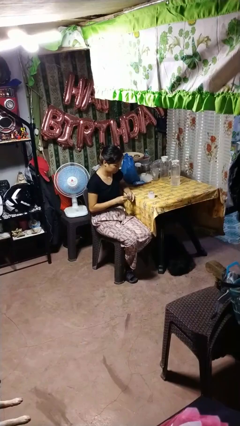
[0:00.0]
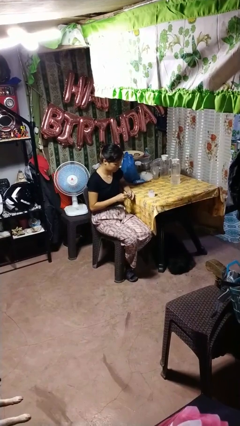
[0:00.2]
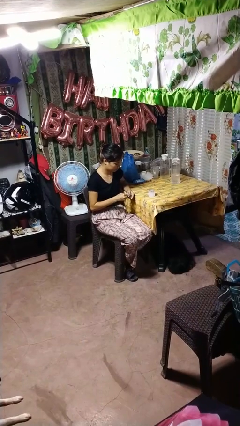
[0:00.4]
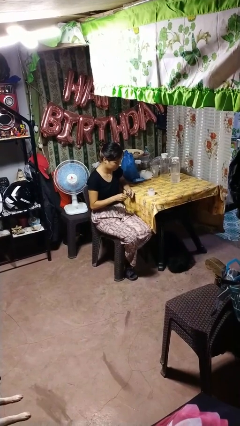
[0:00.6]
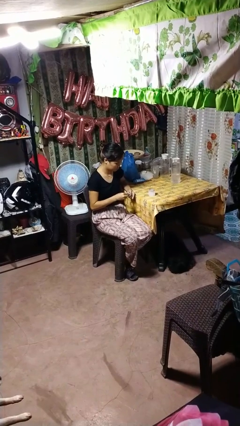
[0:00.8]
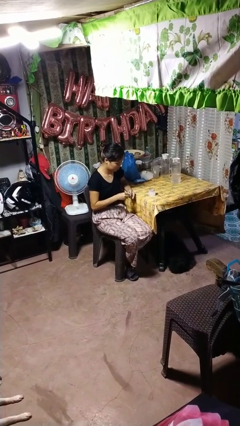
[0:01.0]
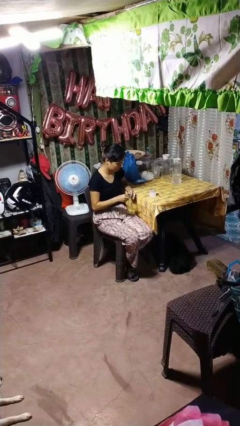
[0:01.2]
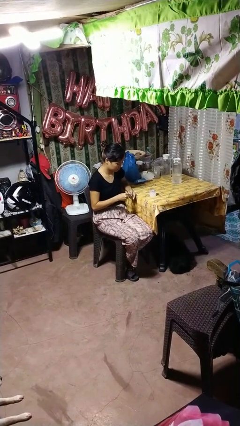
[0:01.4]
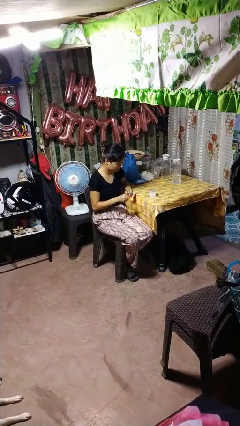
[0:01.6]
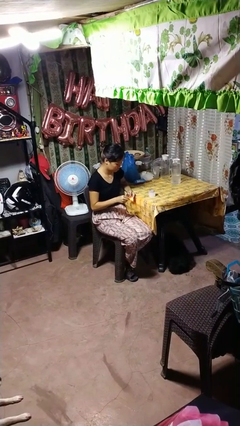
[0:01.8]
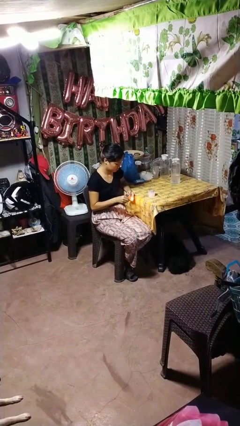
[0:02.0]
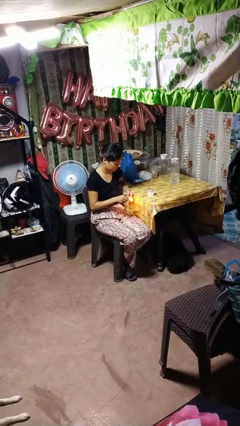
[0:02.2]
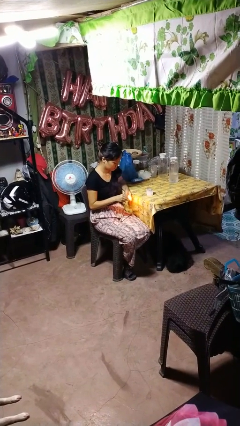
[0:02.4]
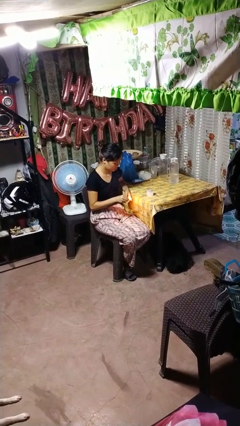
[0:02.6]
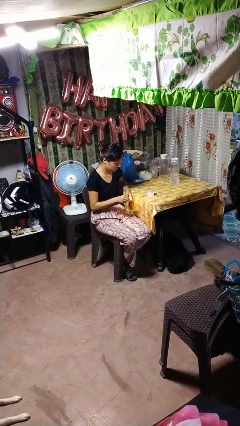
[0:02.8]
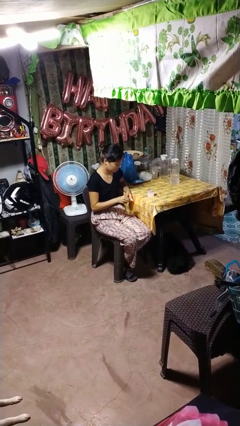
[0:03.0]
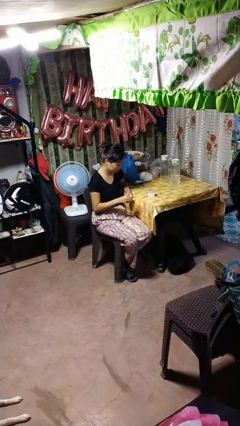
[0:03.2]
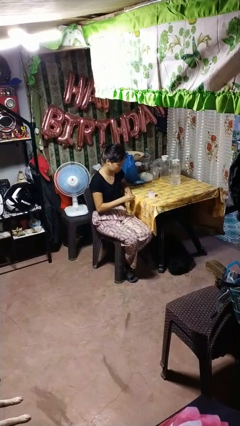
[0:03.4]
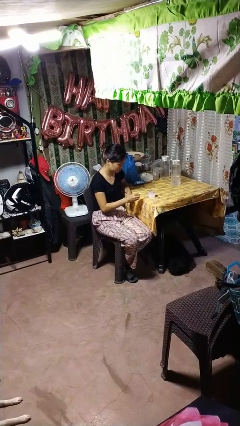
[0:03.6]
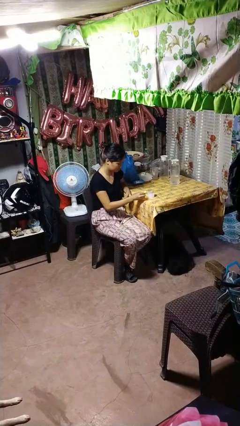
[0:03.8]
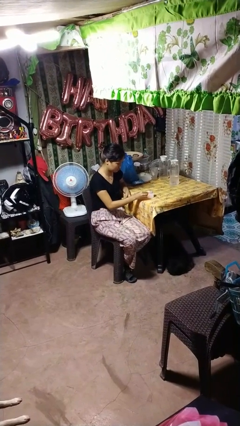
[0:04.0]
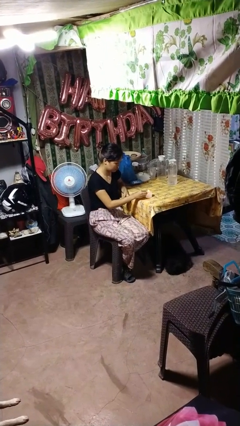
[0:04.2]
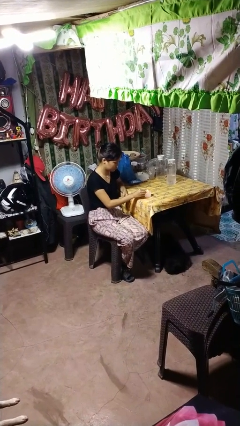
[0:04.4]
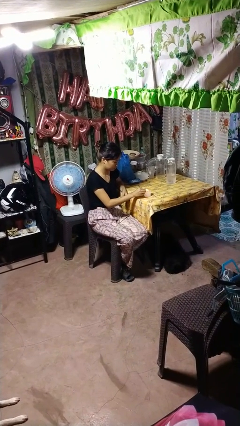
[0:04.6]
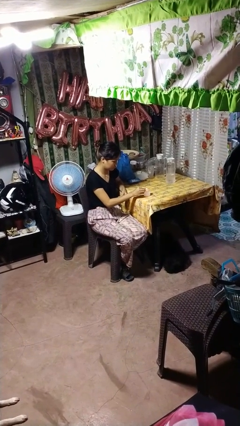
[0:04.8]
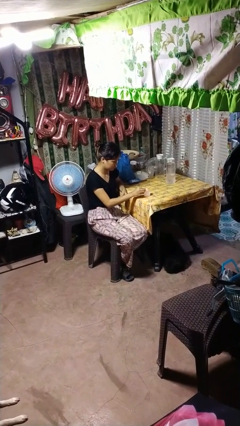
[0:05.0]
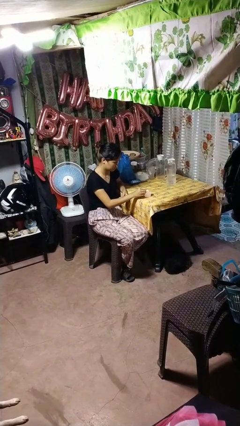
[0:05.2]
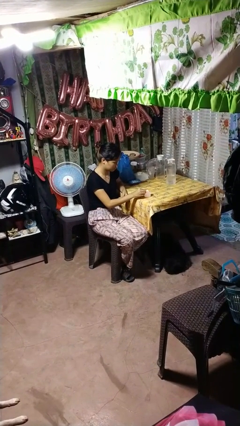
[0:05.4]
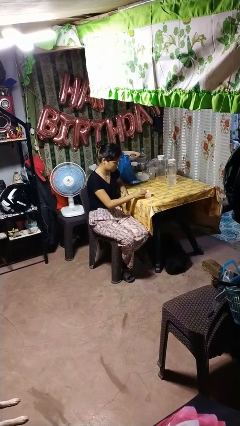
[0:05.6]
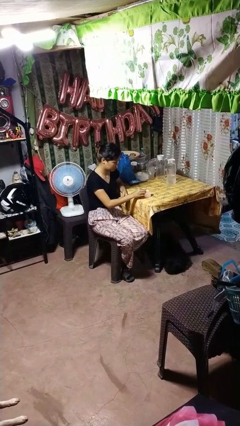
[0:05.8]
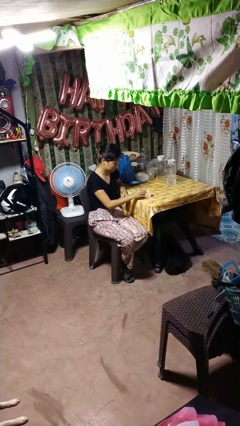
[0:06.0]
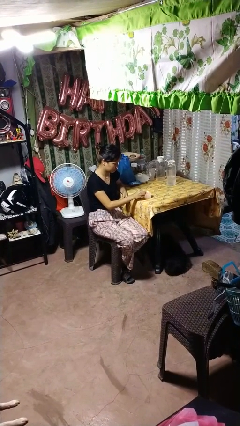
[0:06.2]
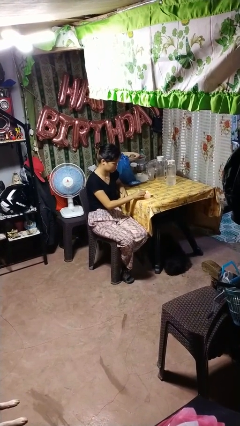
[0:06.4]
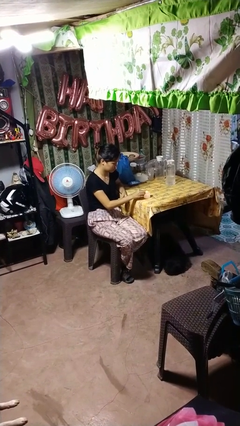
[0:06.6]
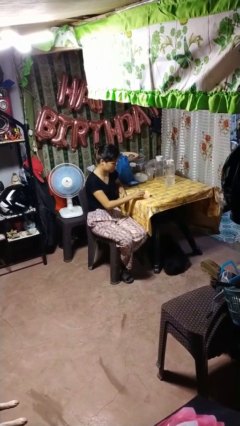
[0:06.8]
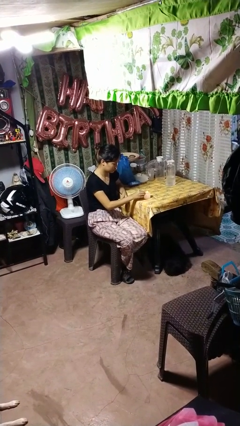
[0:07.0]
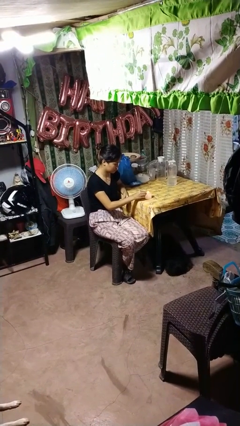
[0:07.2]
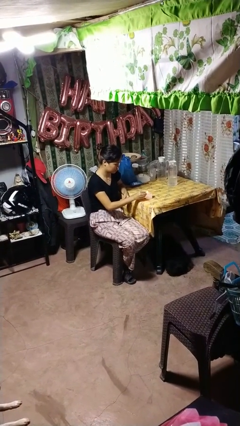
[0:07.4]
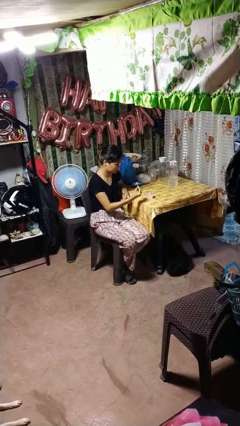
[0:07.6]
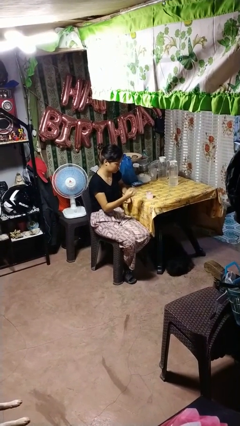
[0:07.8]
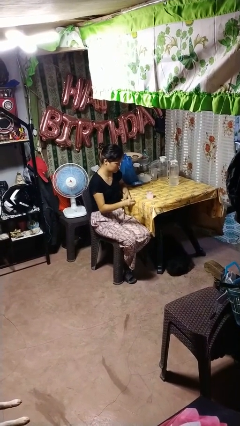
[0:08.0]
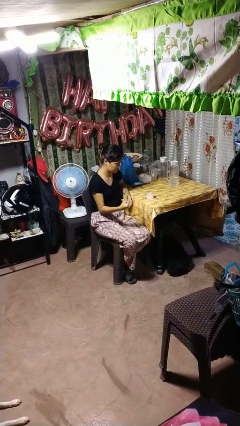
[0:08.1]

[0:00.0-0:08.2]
person lights candle

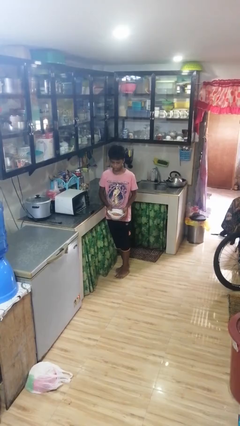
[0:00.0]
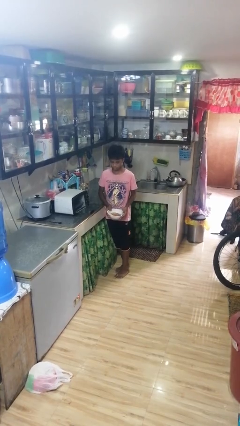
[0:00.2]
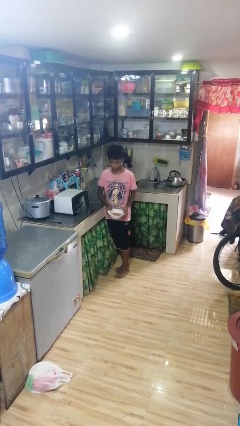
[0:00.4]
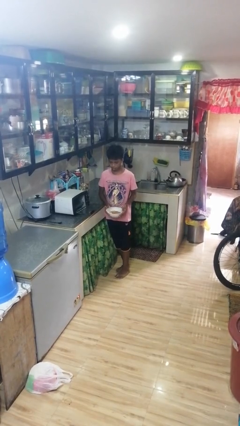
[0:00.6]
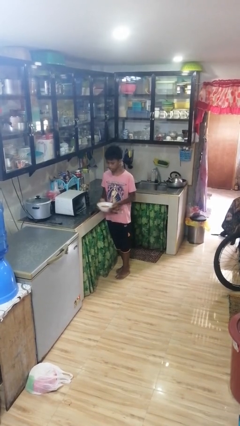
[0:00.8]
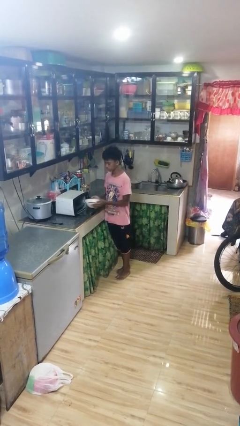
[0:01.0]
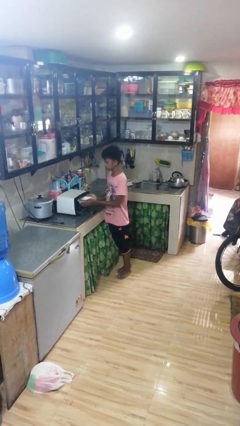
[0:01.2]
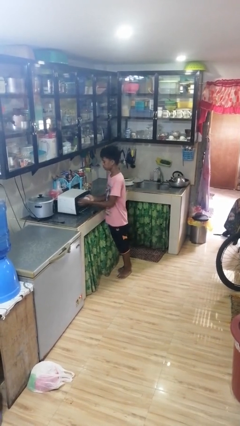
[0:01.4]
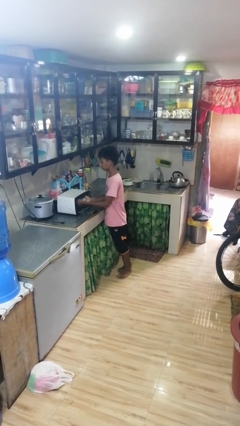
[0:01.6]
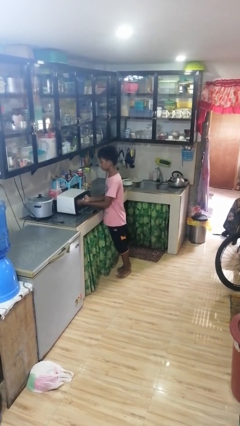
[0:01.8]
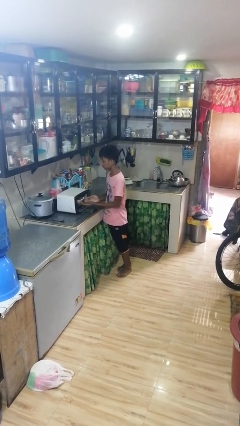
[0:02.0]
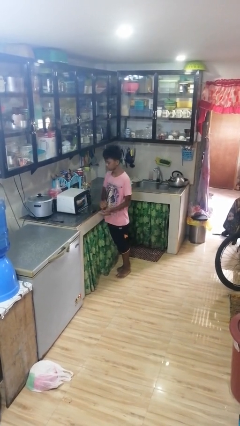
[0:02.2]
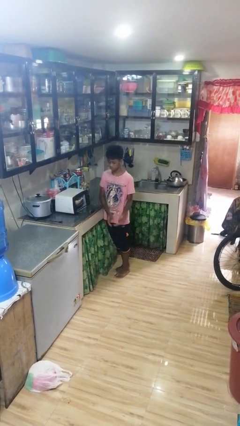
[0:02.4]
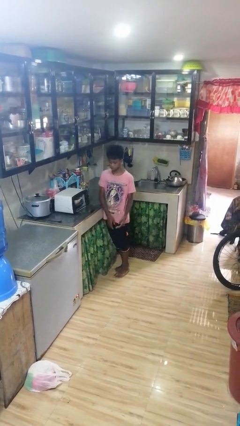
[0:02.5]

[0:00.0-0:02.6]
person puts object into microwave

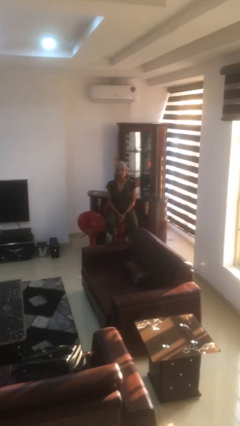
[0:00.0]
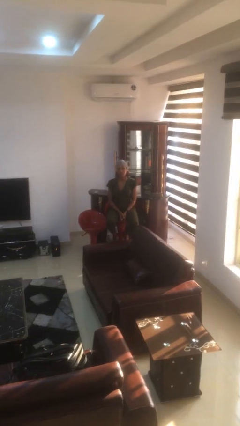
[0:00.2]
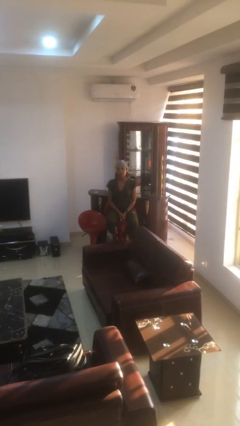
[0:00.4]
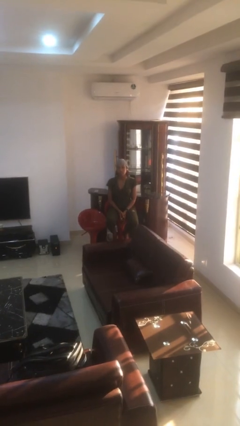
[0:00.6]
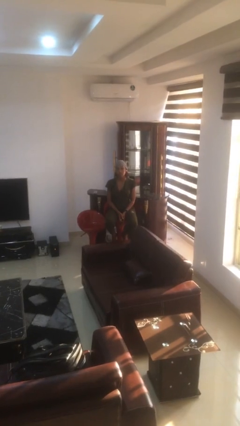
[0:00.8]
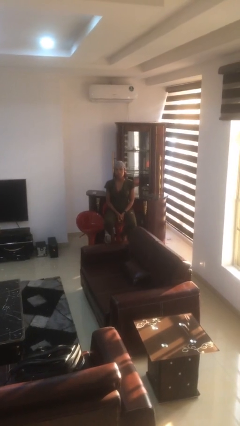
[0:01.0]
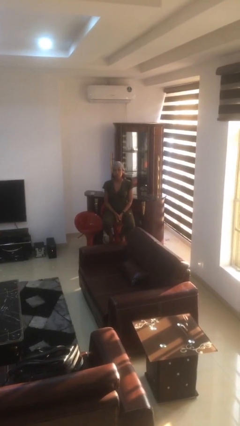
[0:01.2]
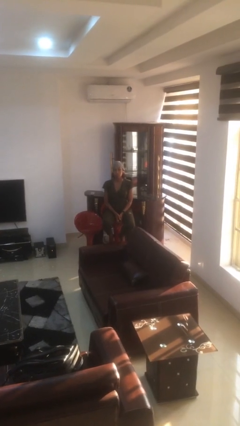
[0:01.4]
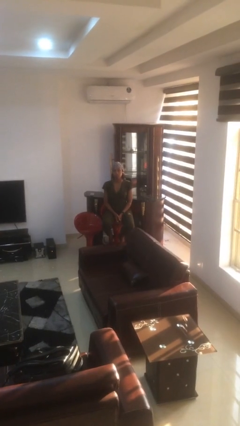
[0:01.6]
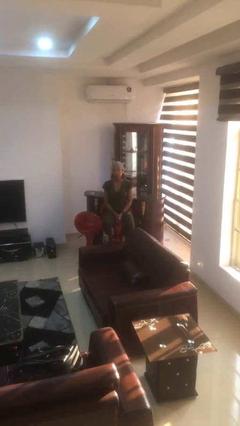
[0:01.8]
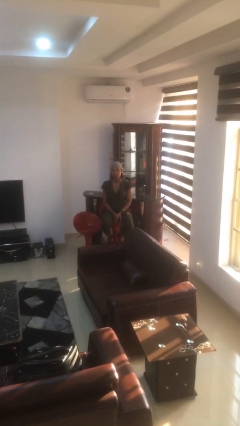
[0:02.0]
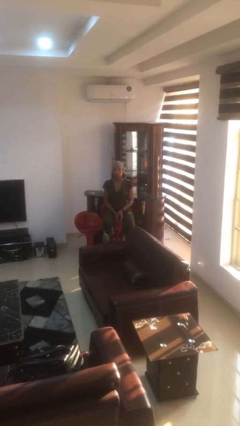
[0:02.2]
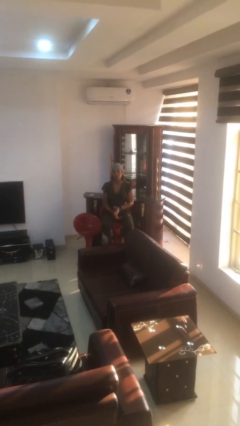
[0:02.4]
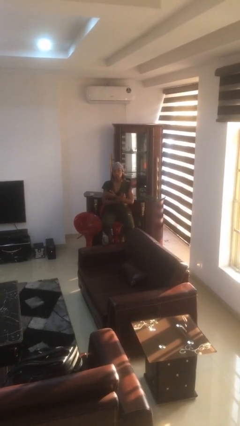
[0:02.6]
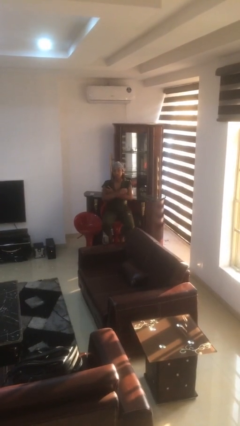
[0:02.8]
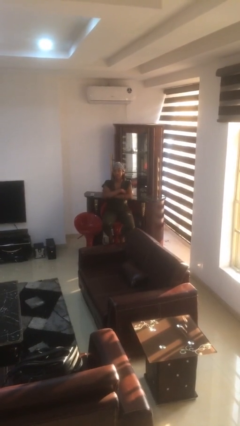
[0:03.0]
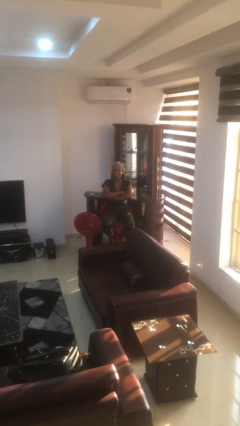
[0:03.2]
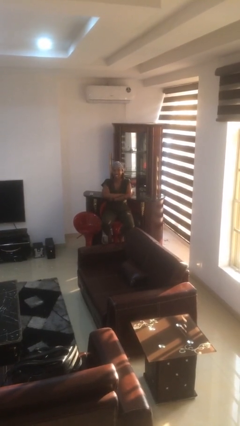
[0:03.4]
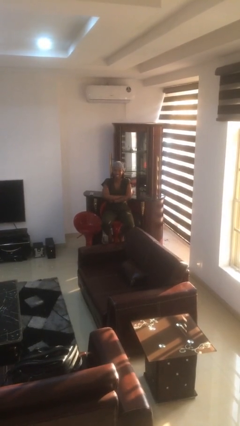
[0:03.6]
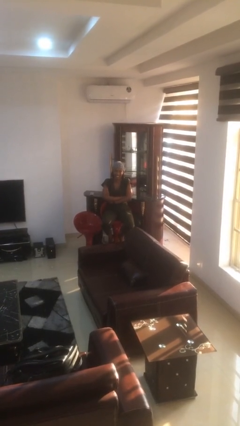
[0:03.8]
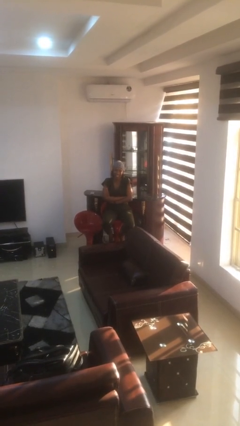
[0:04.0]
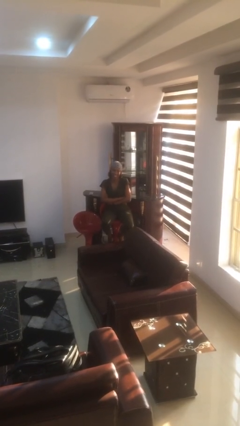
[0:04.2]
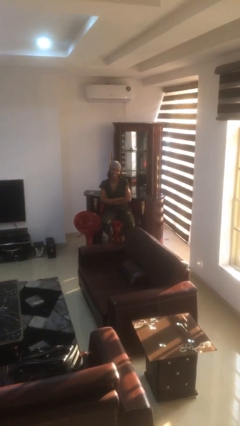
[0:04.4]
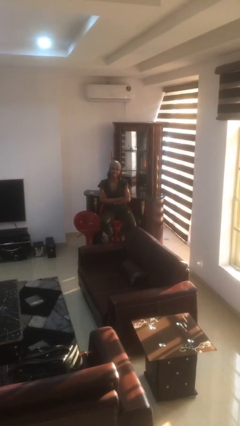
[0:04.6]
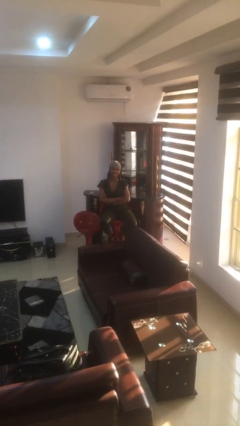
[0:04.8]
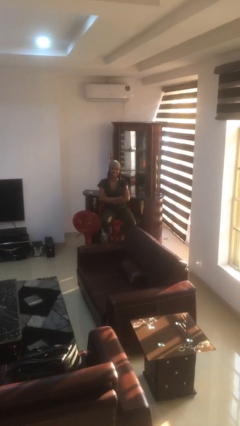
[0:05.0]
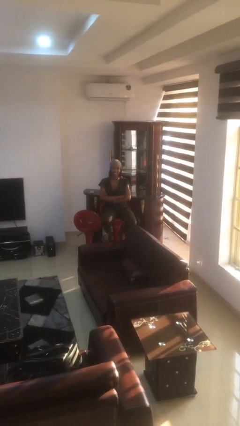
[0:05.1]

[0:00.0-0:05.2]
person crosses arms

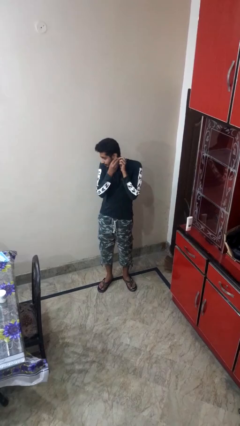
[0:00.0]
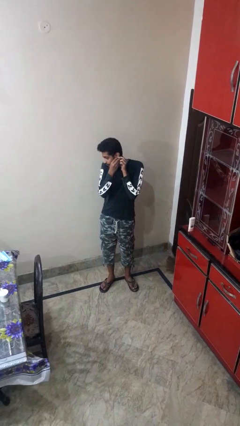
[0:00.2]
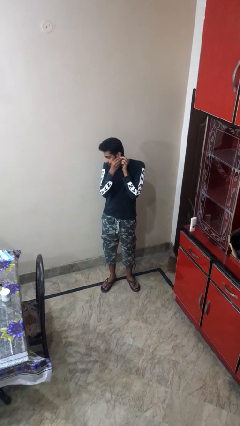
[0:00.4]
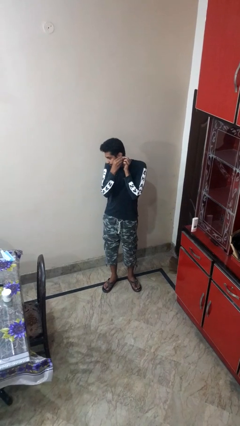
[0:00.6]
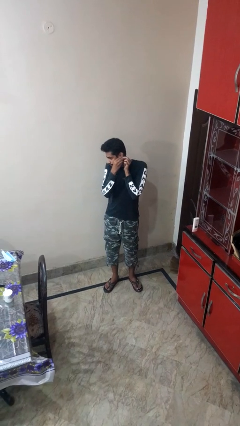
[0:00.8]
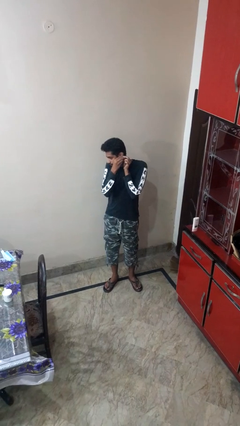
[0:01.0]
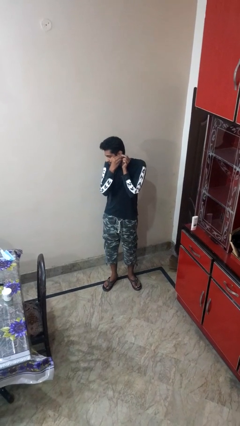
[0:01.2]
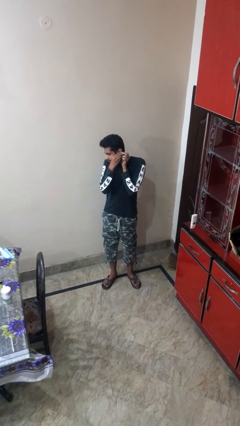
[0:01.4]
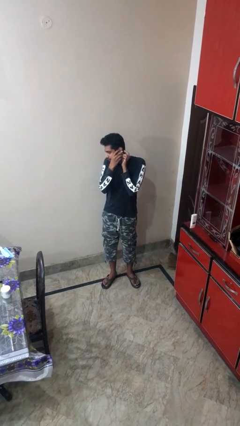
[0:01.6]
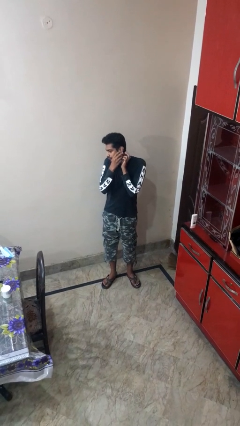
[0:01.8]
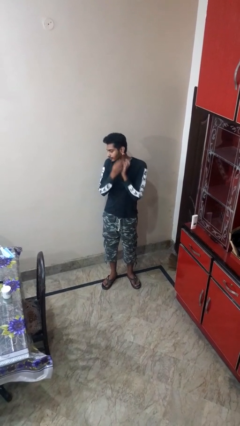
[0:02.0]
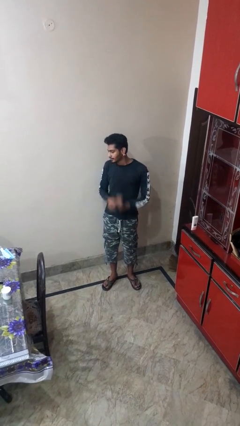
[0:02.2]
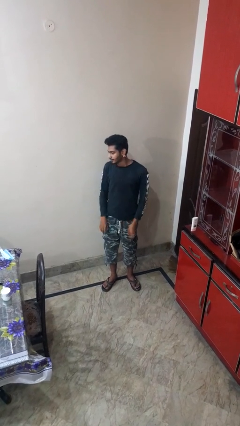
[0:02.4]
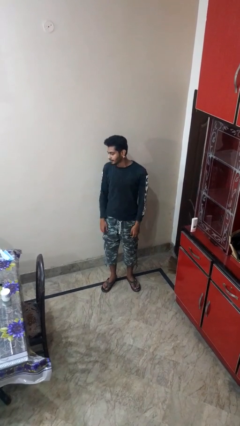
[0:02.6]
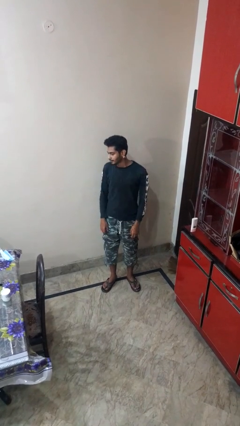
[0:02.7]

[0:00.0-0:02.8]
person puts on earrings
